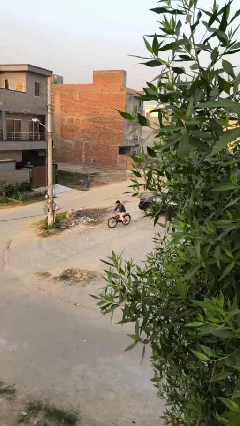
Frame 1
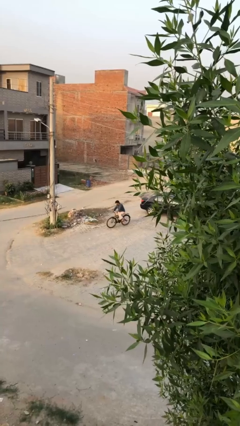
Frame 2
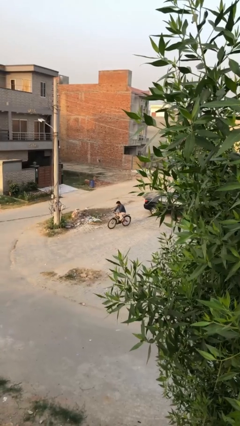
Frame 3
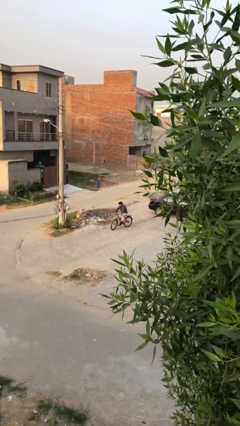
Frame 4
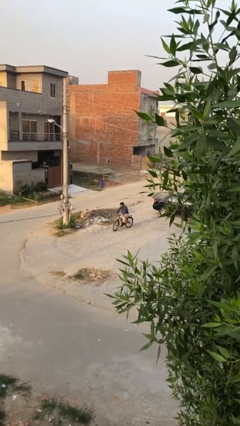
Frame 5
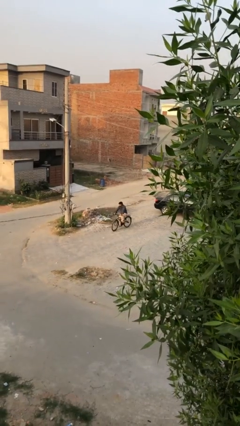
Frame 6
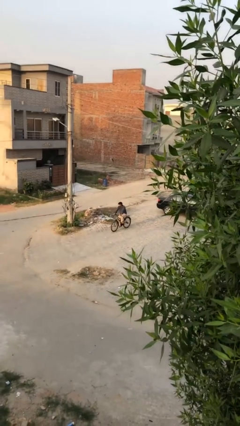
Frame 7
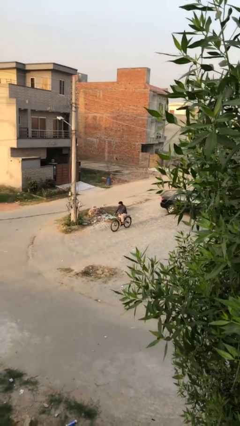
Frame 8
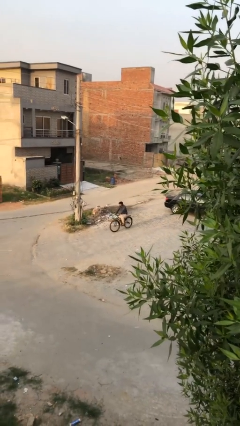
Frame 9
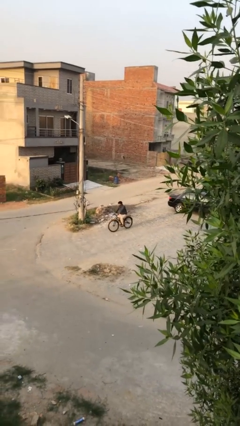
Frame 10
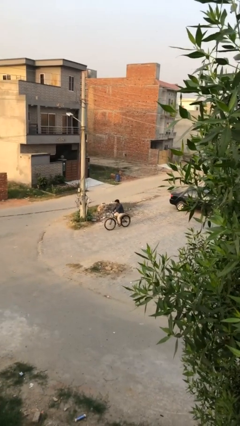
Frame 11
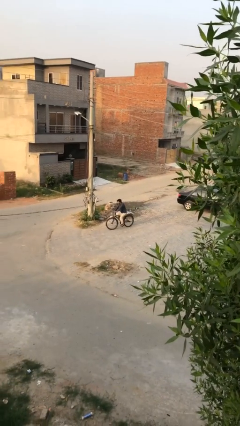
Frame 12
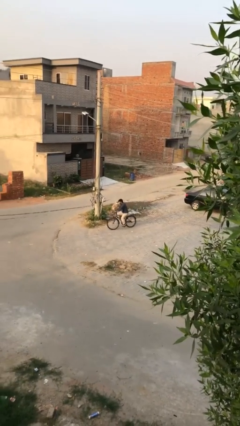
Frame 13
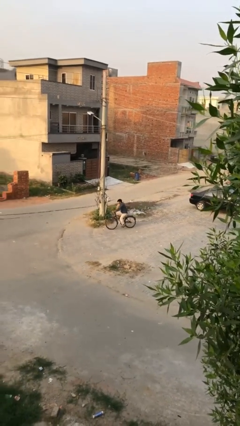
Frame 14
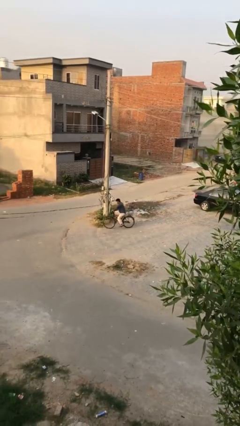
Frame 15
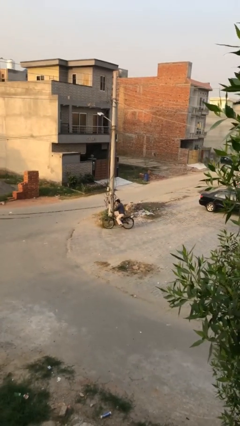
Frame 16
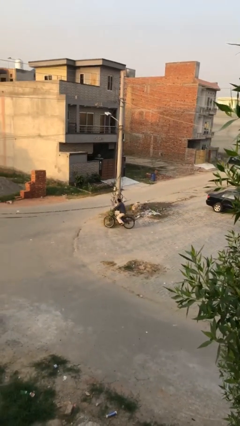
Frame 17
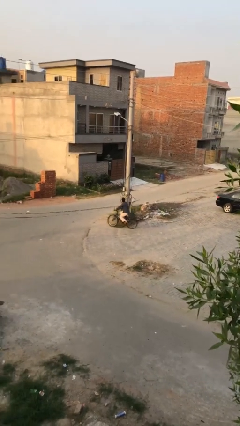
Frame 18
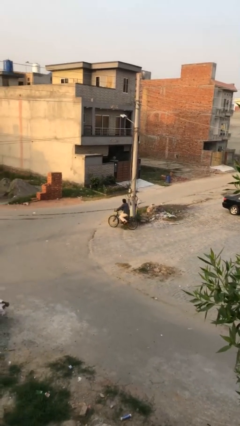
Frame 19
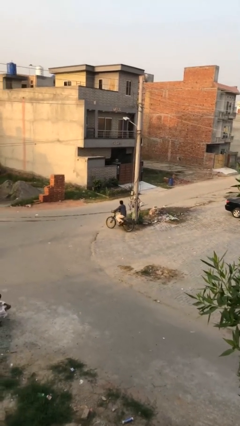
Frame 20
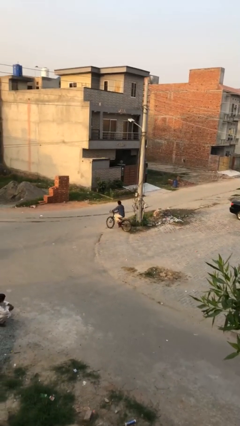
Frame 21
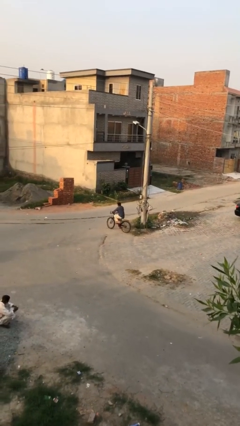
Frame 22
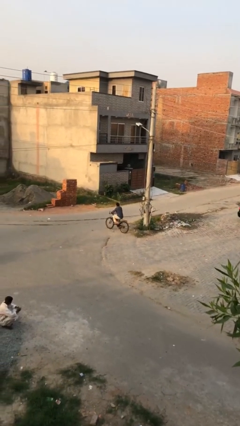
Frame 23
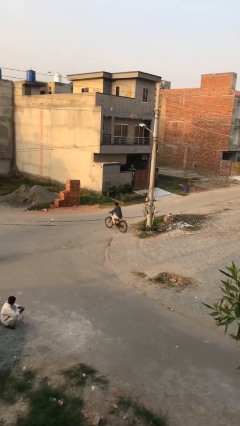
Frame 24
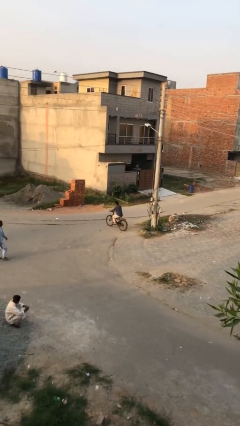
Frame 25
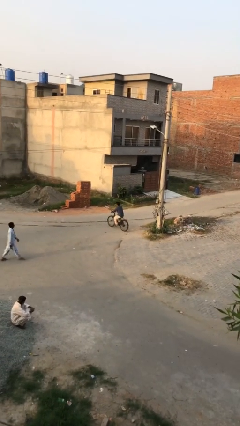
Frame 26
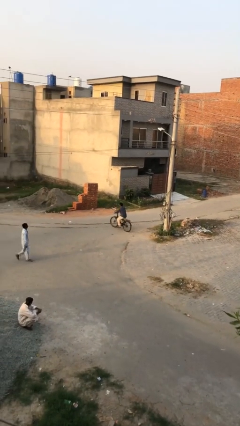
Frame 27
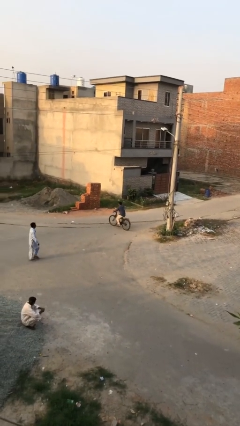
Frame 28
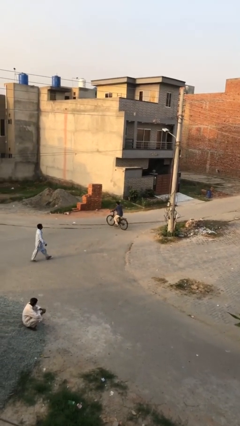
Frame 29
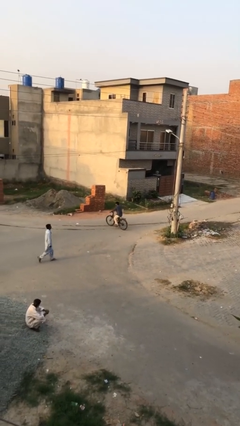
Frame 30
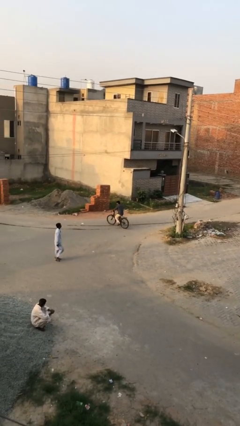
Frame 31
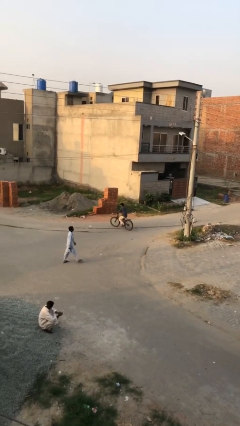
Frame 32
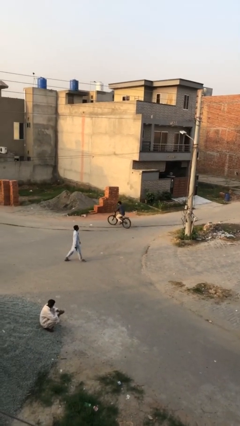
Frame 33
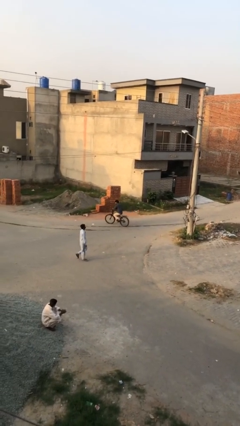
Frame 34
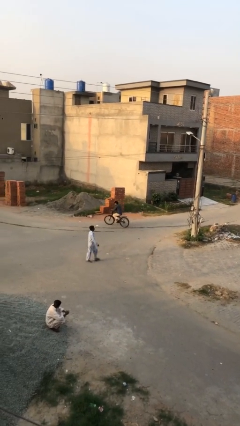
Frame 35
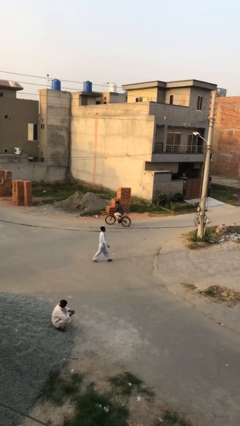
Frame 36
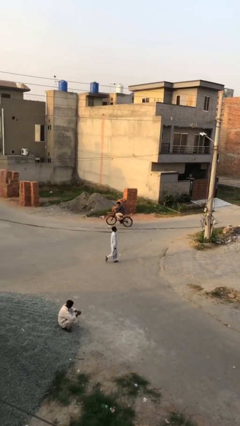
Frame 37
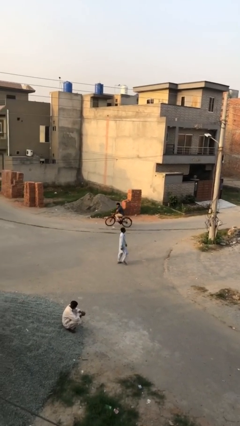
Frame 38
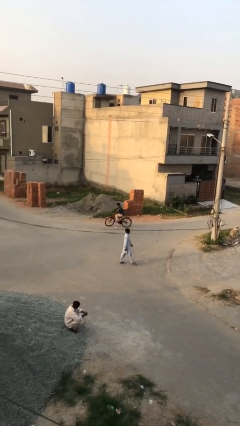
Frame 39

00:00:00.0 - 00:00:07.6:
person rides bicycle

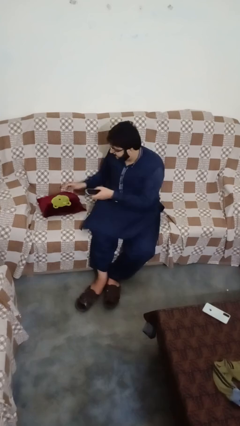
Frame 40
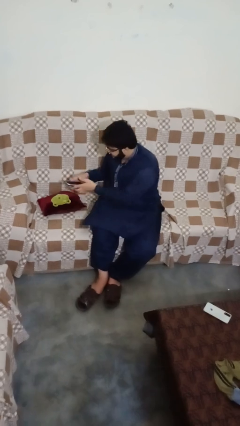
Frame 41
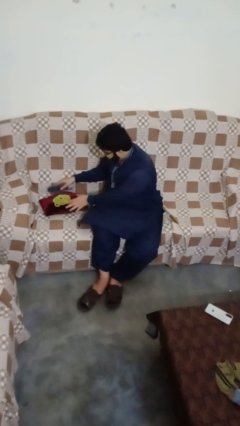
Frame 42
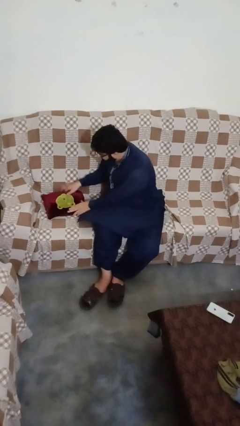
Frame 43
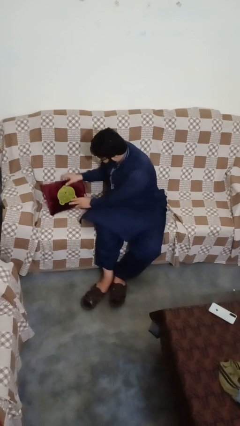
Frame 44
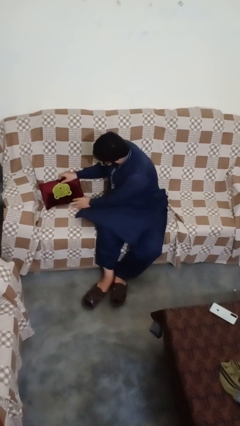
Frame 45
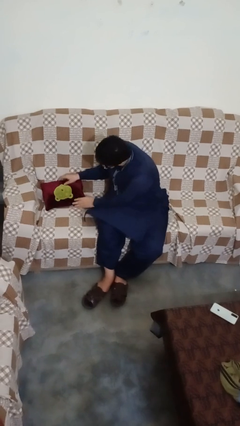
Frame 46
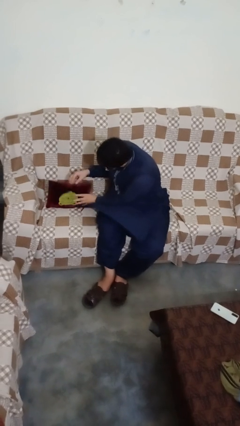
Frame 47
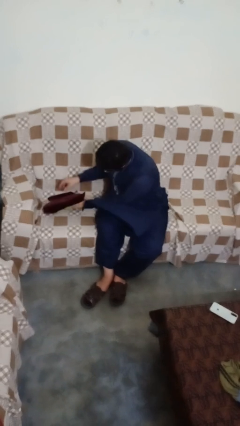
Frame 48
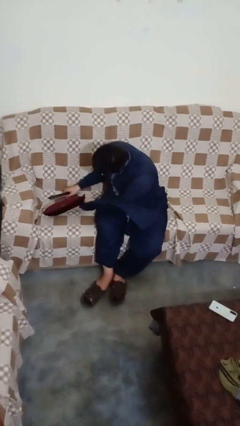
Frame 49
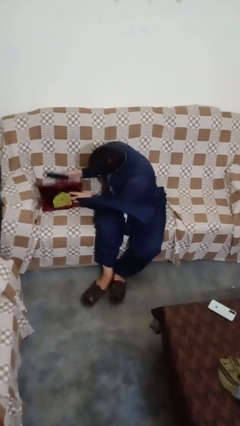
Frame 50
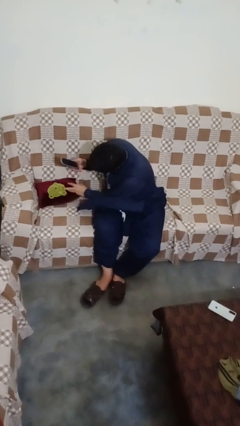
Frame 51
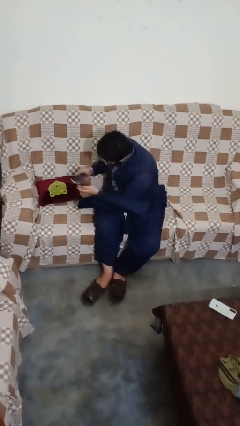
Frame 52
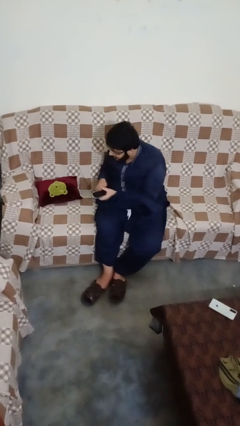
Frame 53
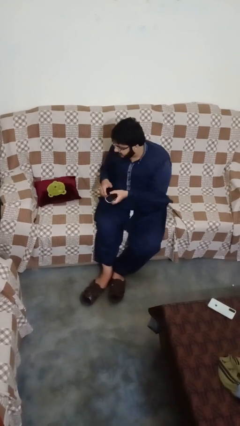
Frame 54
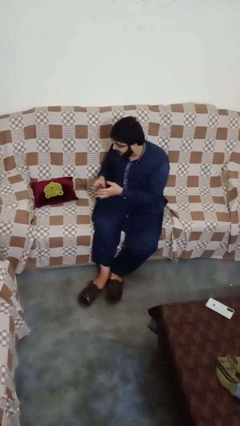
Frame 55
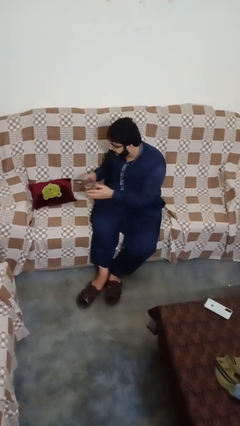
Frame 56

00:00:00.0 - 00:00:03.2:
person searches in couch

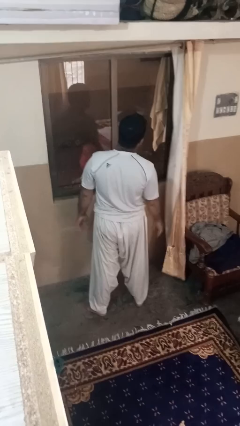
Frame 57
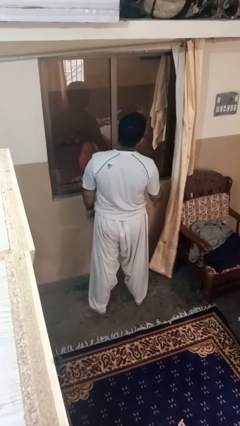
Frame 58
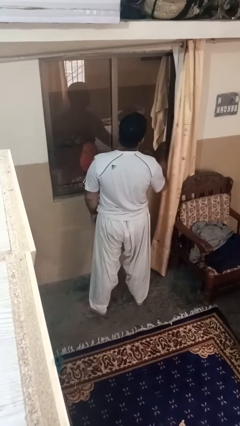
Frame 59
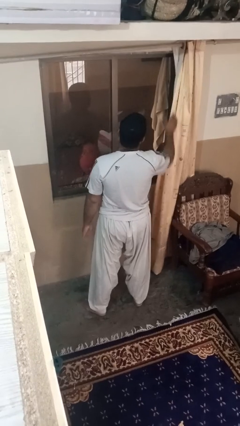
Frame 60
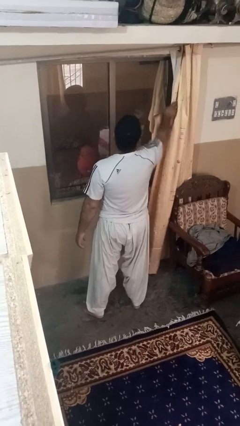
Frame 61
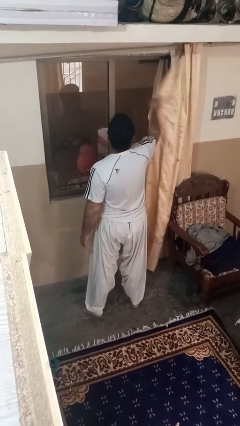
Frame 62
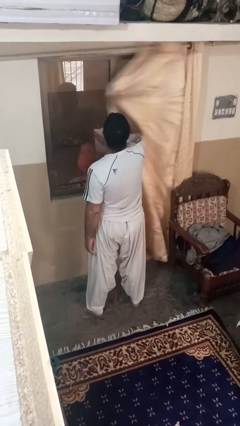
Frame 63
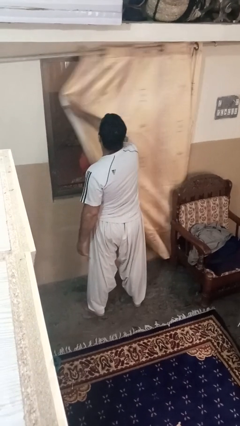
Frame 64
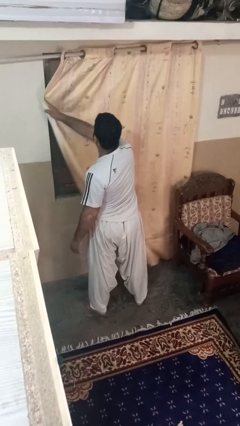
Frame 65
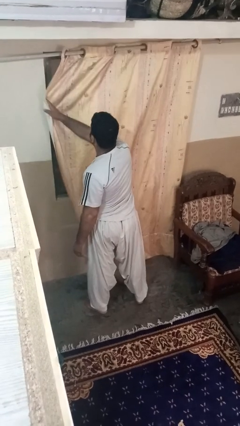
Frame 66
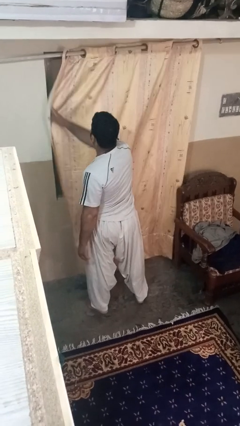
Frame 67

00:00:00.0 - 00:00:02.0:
person closes curtains

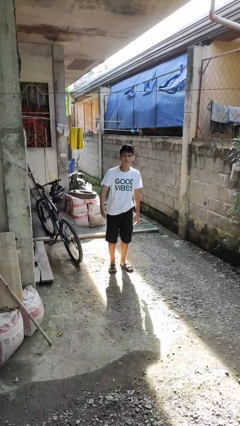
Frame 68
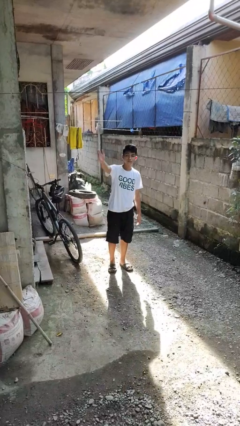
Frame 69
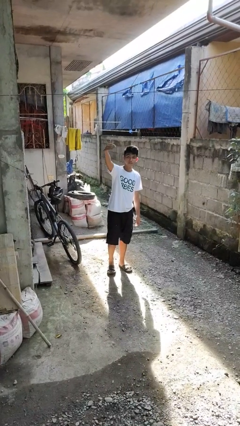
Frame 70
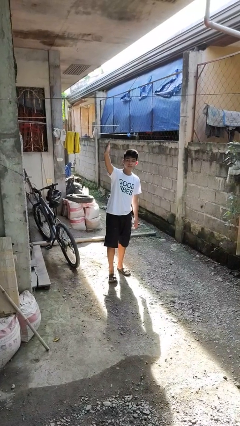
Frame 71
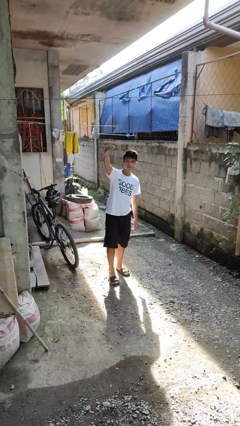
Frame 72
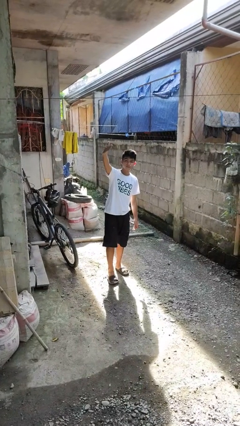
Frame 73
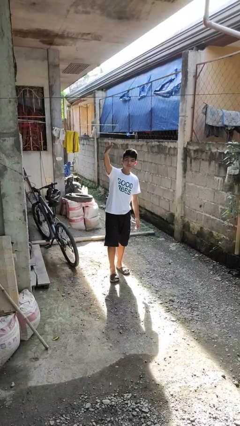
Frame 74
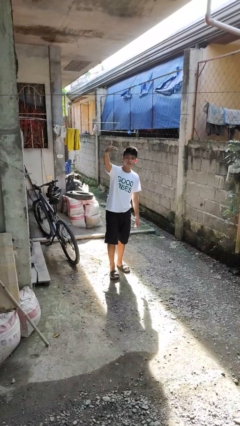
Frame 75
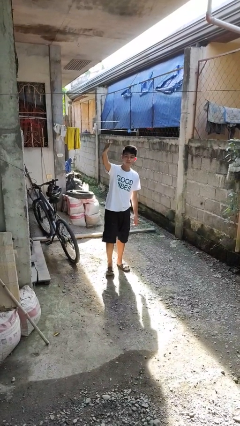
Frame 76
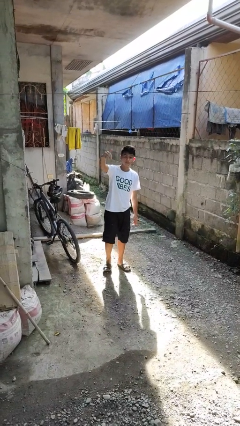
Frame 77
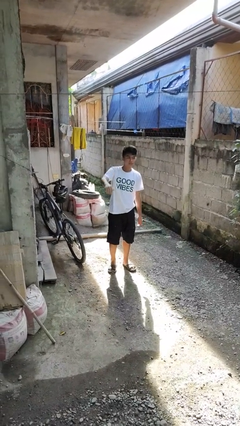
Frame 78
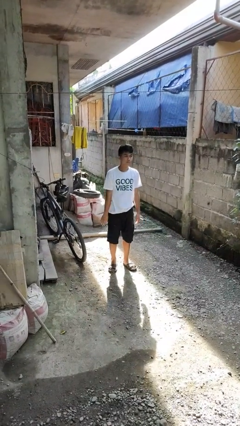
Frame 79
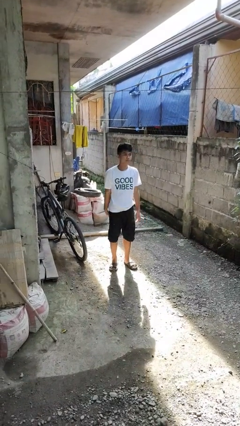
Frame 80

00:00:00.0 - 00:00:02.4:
person gestures come here

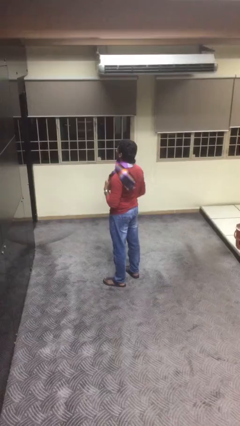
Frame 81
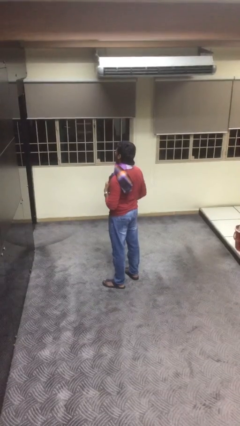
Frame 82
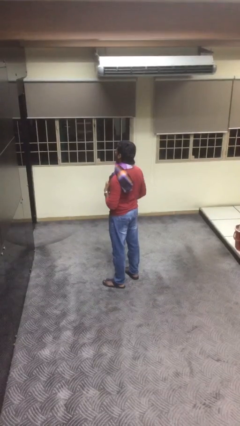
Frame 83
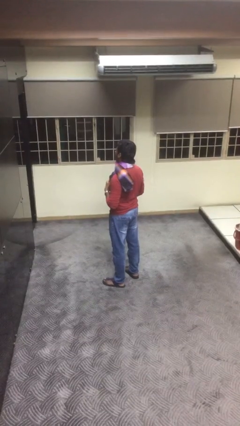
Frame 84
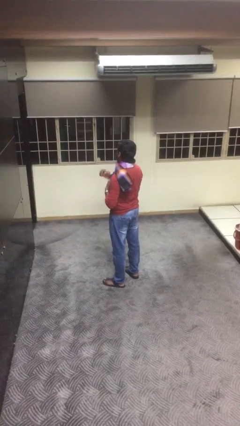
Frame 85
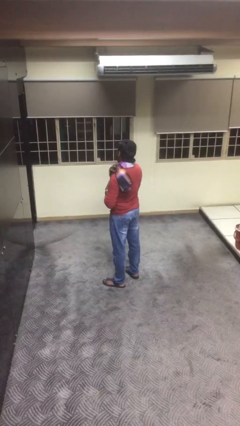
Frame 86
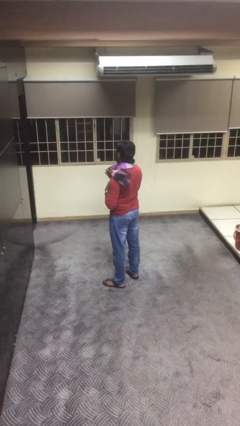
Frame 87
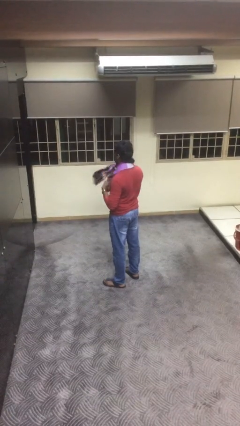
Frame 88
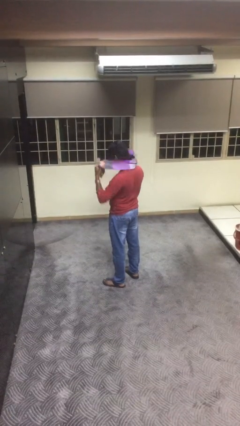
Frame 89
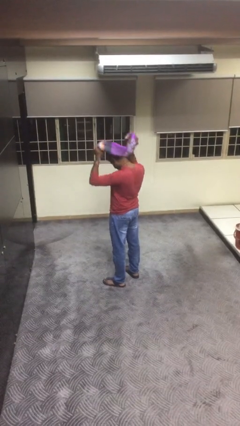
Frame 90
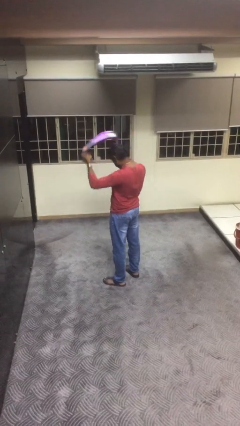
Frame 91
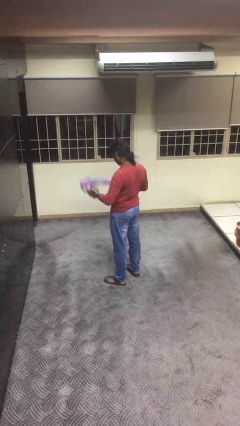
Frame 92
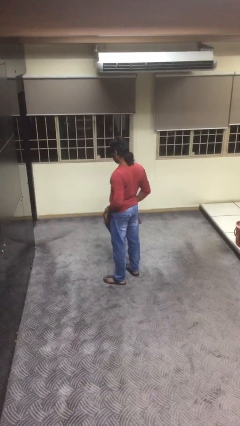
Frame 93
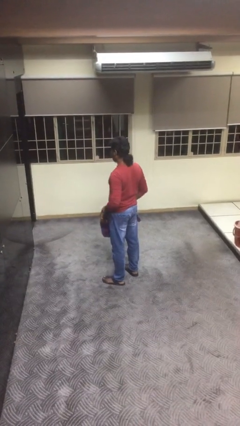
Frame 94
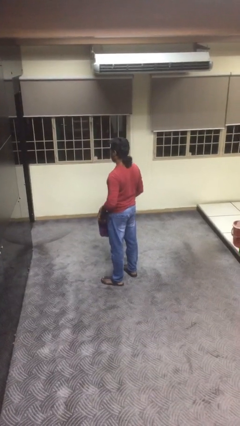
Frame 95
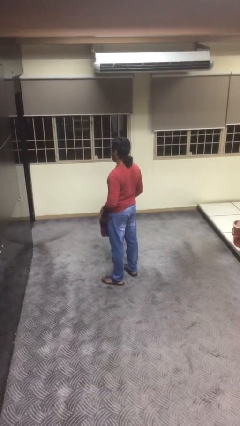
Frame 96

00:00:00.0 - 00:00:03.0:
person takes off scarf
